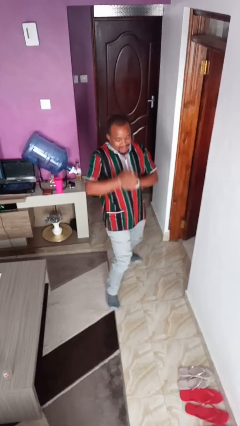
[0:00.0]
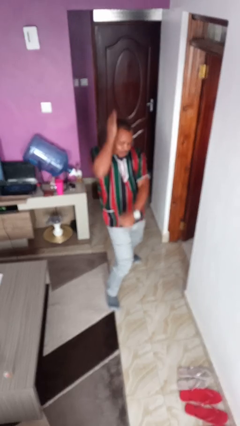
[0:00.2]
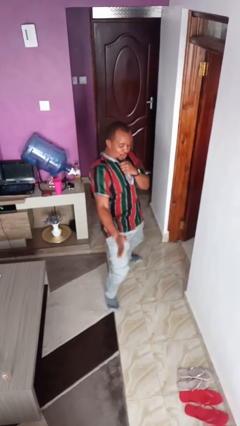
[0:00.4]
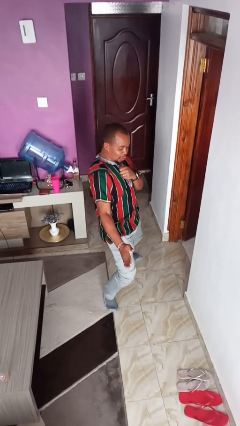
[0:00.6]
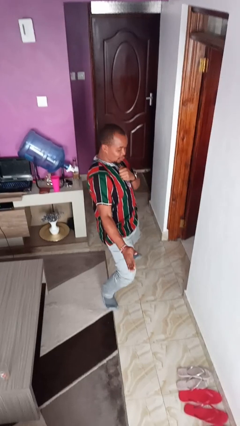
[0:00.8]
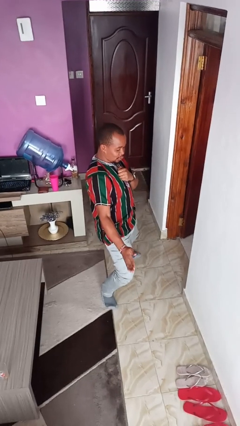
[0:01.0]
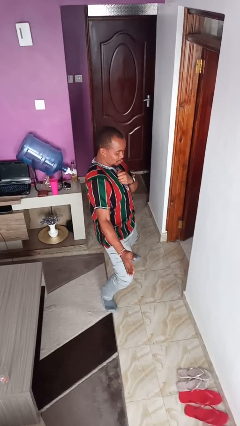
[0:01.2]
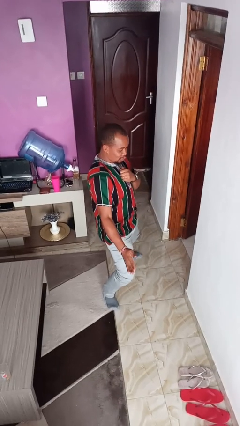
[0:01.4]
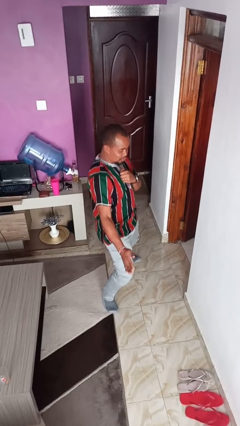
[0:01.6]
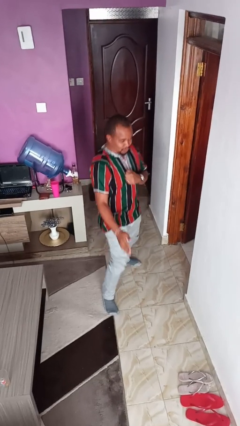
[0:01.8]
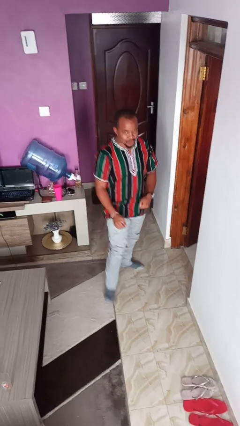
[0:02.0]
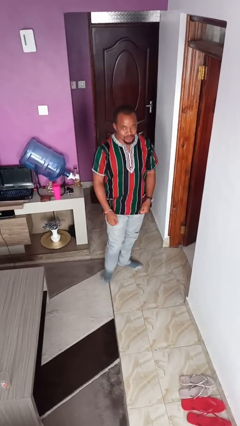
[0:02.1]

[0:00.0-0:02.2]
person karate chop

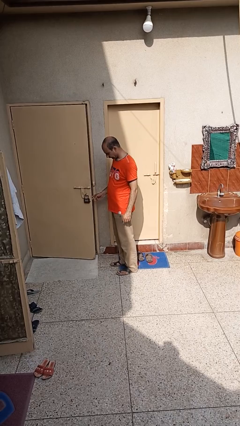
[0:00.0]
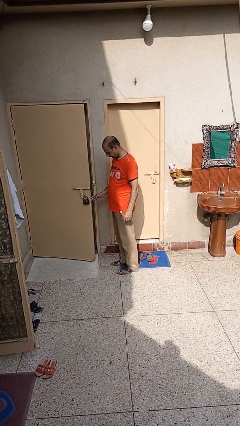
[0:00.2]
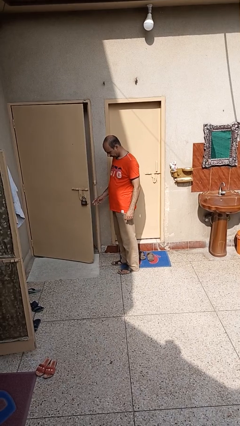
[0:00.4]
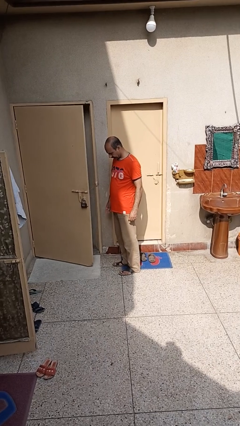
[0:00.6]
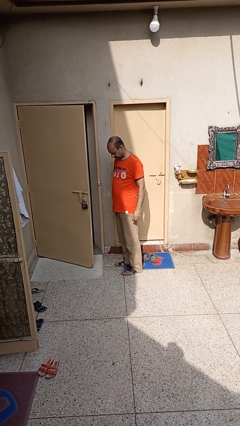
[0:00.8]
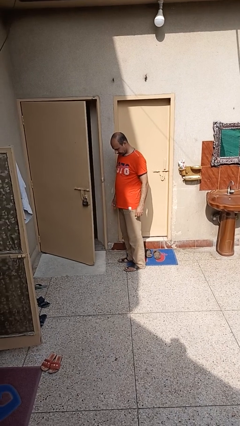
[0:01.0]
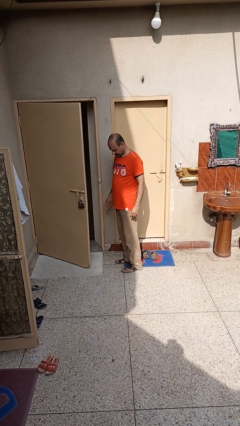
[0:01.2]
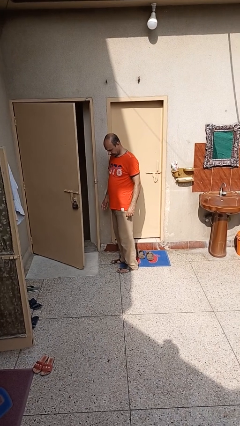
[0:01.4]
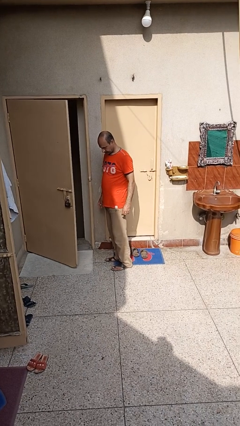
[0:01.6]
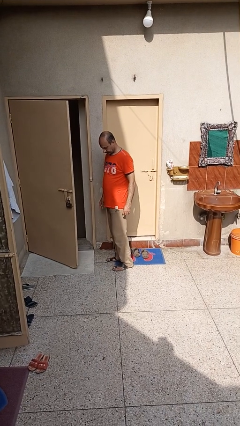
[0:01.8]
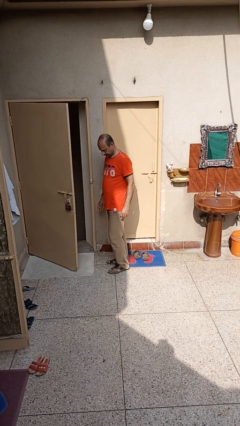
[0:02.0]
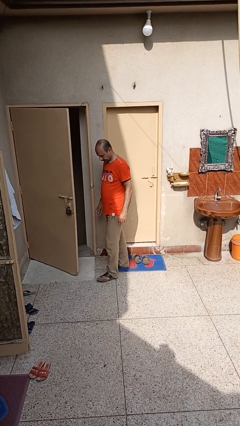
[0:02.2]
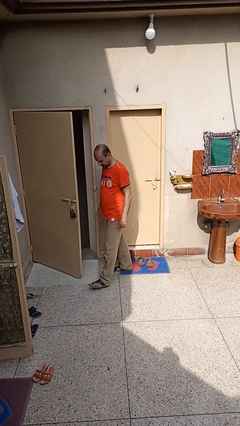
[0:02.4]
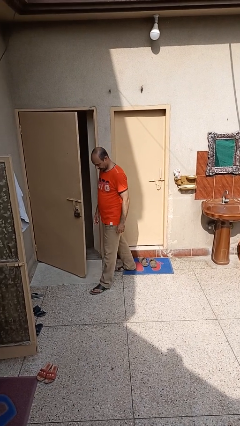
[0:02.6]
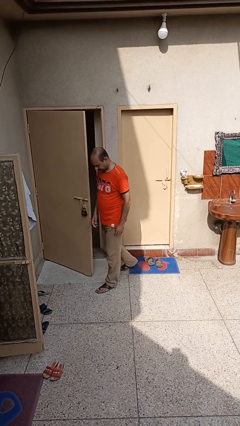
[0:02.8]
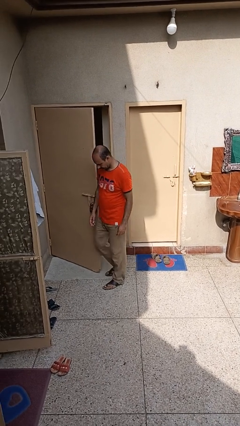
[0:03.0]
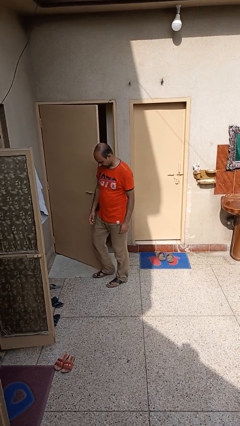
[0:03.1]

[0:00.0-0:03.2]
person opens facility door

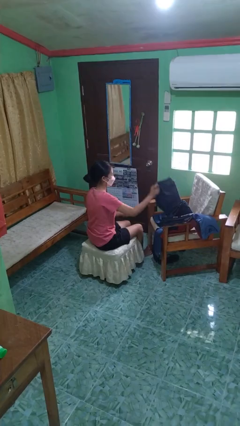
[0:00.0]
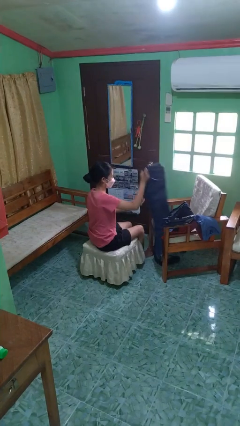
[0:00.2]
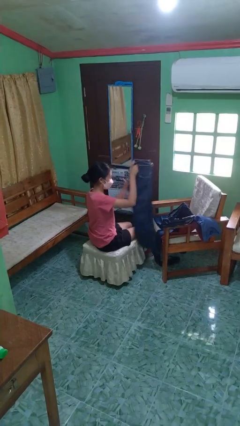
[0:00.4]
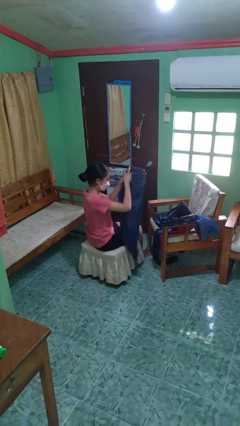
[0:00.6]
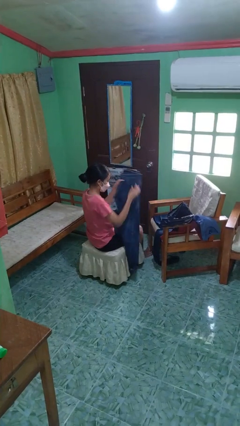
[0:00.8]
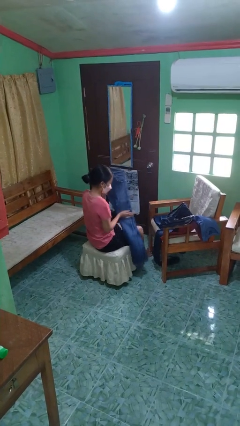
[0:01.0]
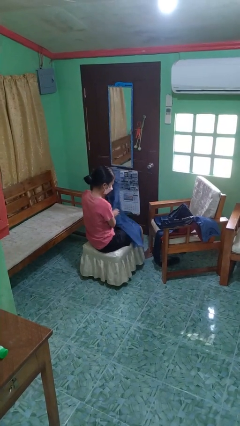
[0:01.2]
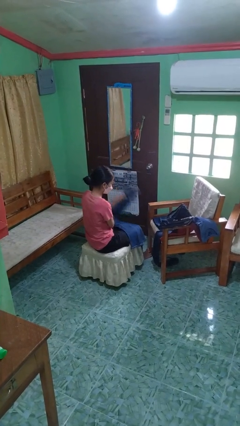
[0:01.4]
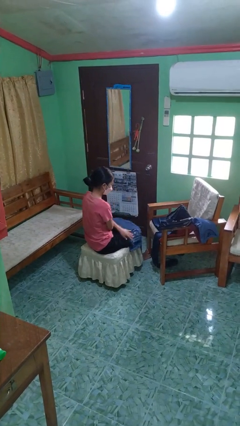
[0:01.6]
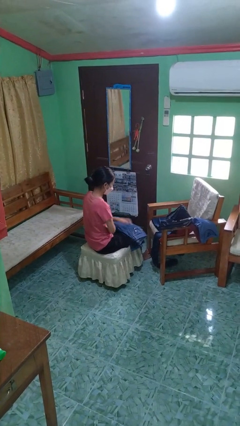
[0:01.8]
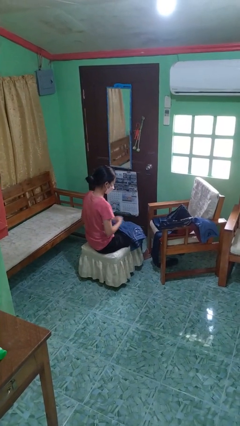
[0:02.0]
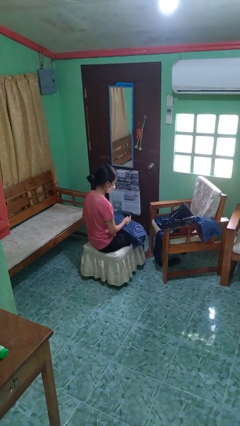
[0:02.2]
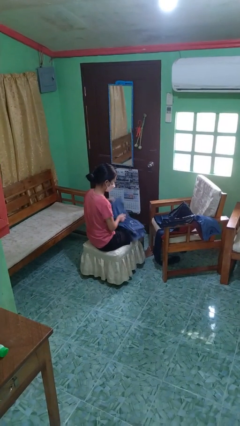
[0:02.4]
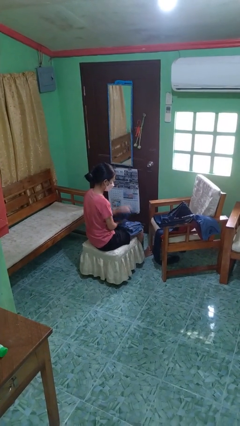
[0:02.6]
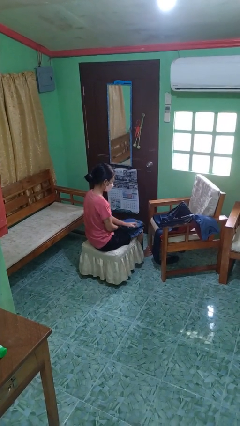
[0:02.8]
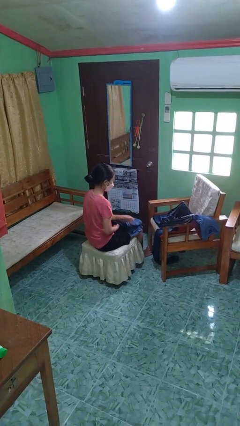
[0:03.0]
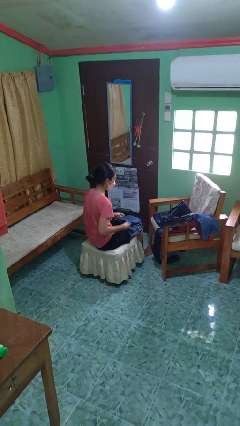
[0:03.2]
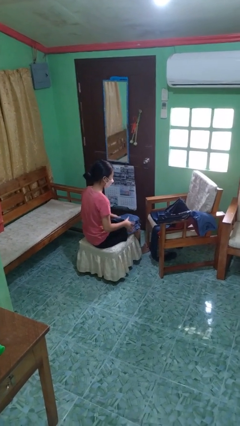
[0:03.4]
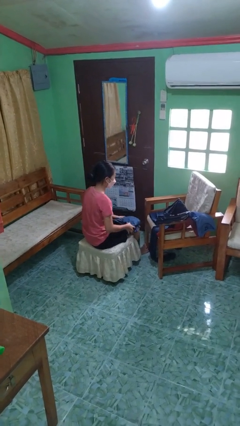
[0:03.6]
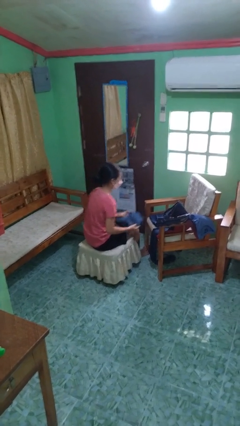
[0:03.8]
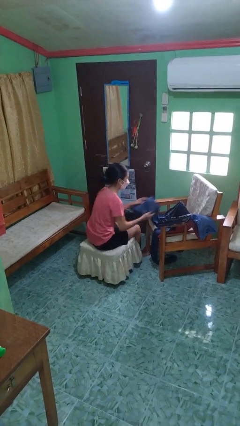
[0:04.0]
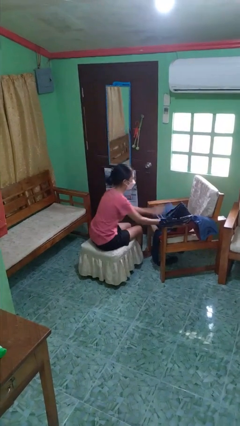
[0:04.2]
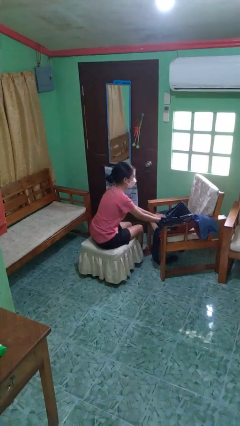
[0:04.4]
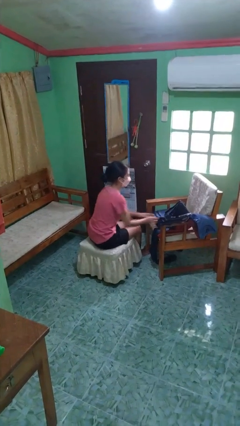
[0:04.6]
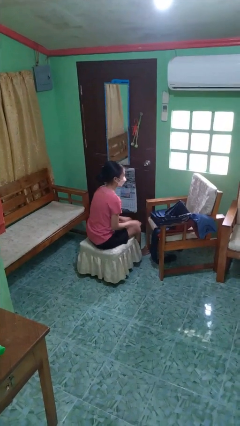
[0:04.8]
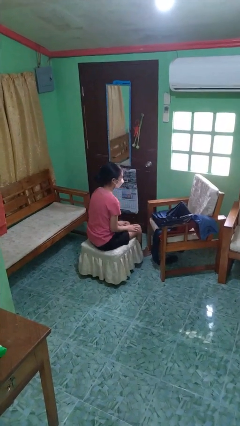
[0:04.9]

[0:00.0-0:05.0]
person folds pants

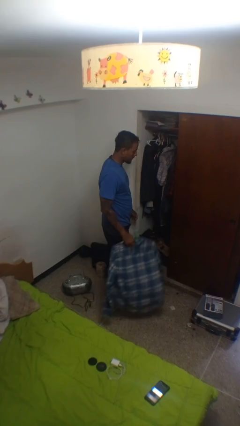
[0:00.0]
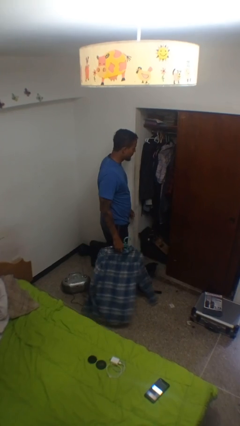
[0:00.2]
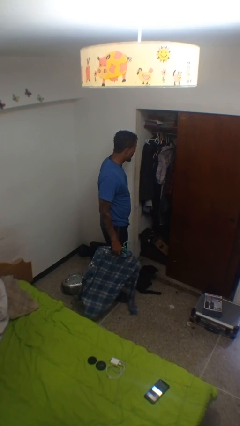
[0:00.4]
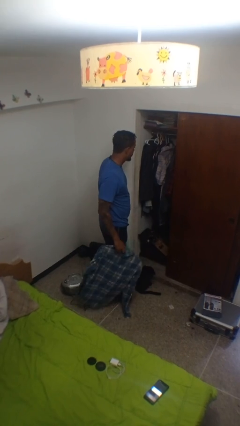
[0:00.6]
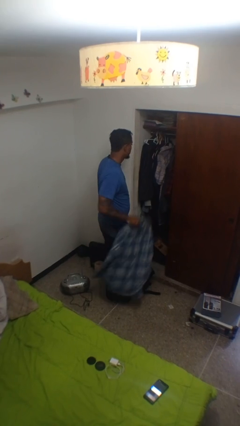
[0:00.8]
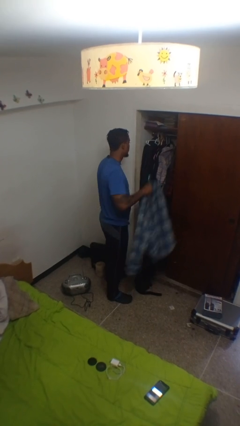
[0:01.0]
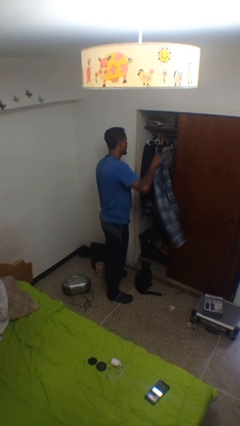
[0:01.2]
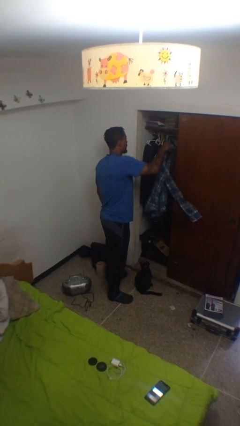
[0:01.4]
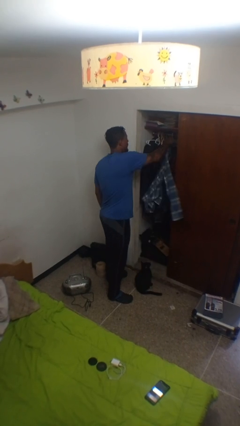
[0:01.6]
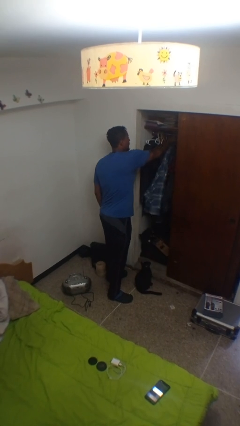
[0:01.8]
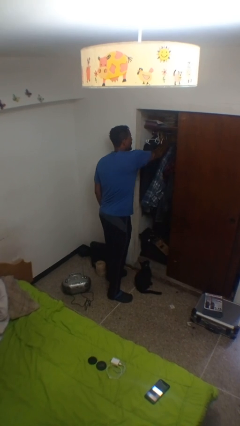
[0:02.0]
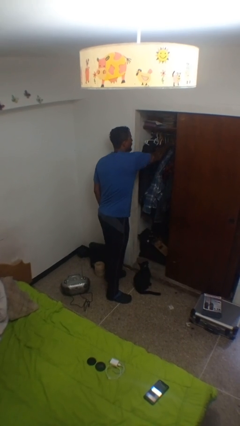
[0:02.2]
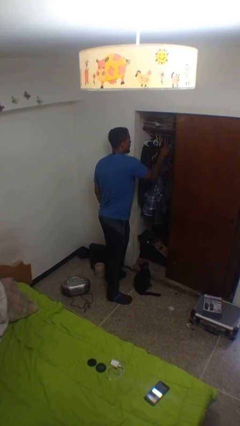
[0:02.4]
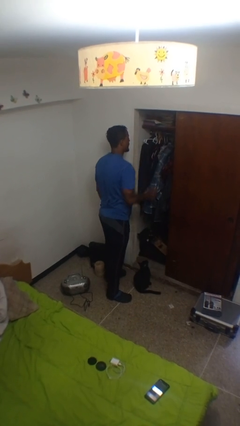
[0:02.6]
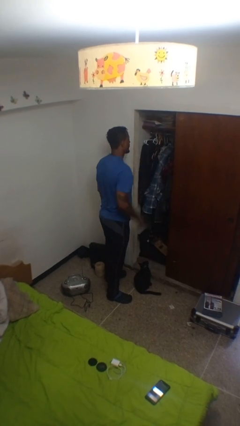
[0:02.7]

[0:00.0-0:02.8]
person puts clothes into closet

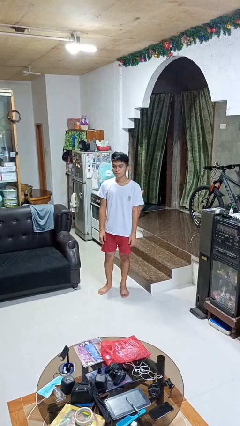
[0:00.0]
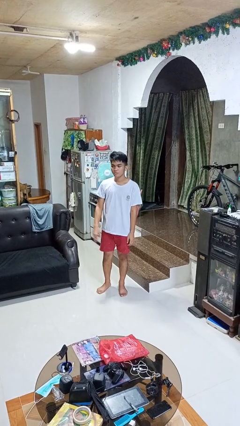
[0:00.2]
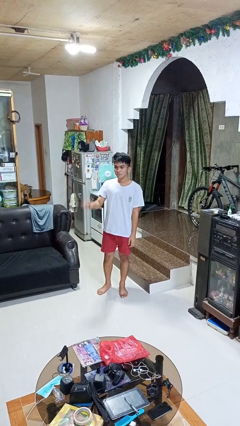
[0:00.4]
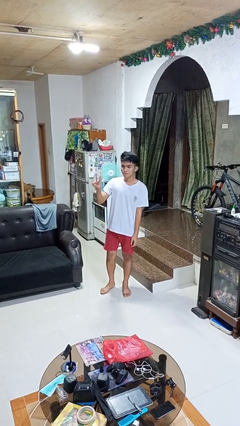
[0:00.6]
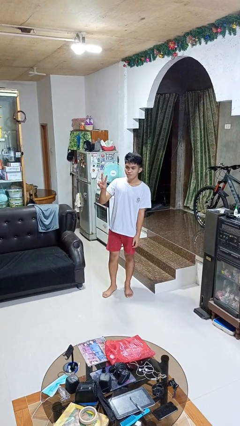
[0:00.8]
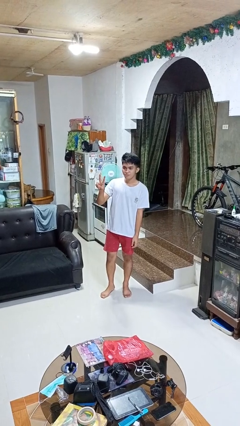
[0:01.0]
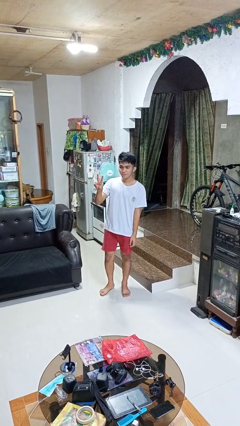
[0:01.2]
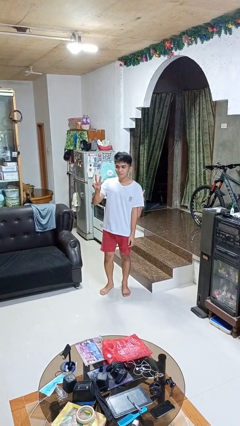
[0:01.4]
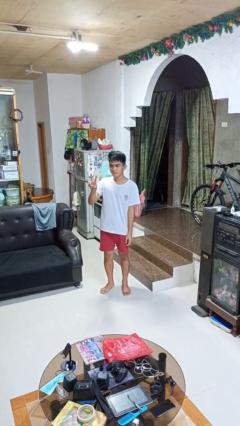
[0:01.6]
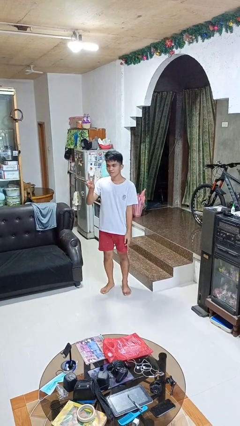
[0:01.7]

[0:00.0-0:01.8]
person gestures peace

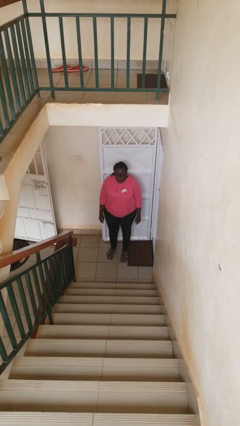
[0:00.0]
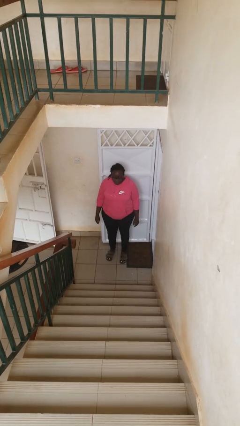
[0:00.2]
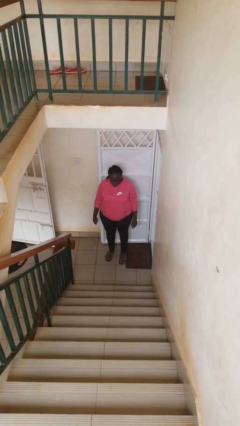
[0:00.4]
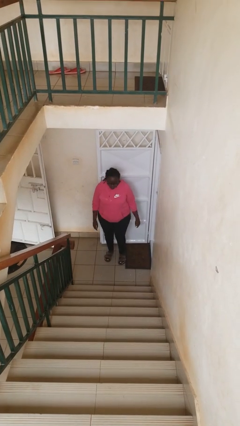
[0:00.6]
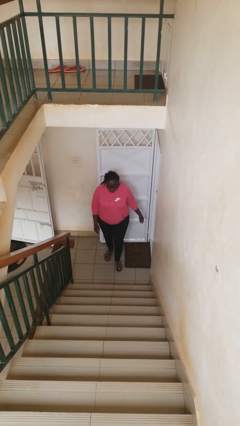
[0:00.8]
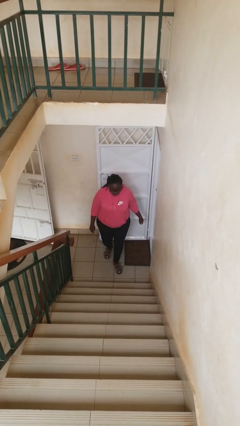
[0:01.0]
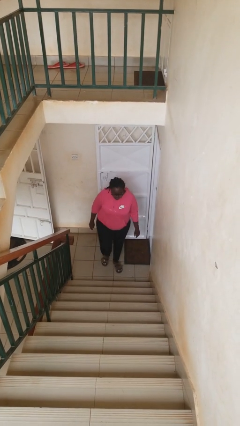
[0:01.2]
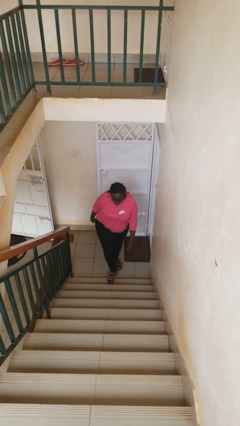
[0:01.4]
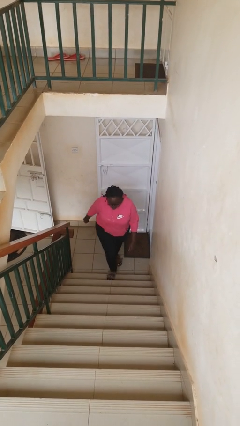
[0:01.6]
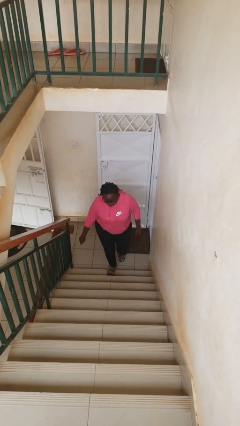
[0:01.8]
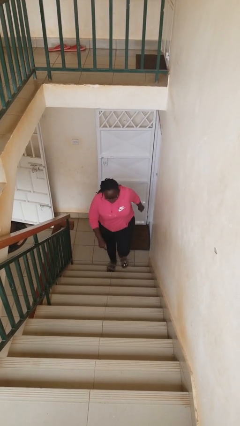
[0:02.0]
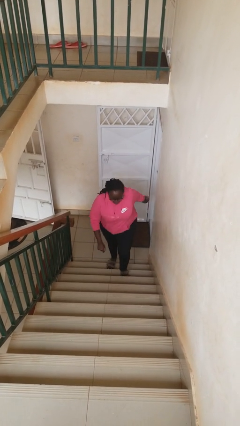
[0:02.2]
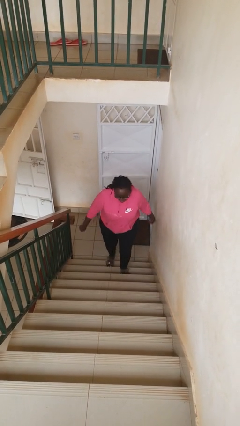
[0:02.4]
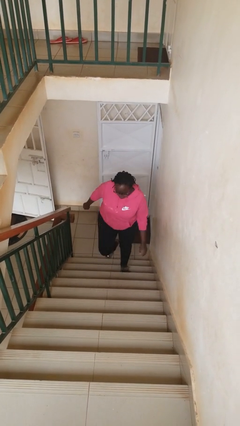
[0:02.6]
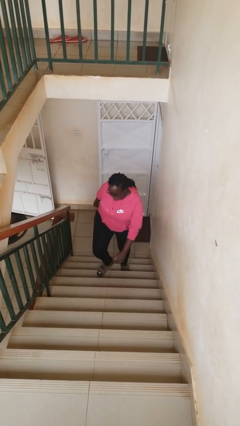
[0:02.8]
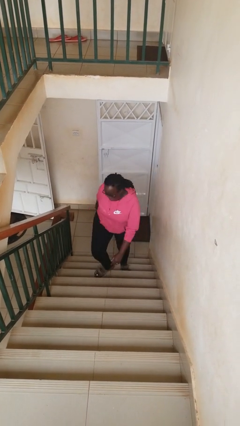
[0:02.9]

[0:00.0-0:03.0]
person climbs up stairs
